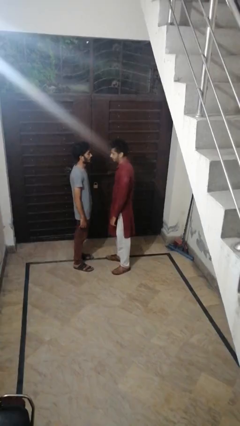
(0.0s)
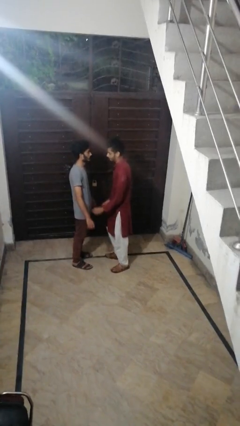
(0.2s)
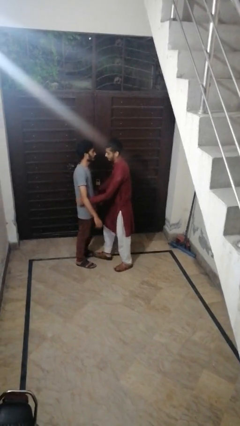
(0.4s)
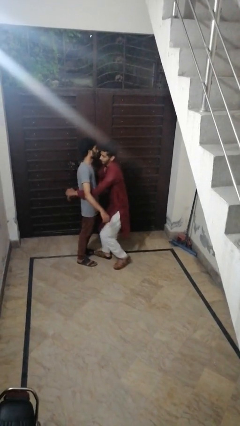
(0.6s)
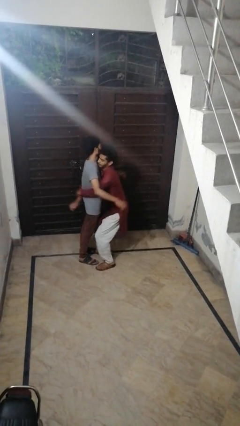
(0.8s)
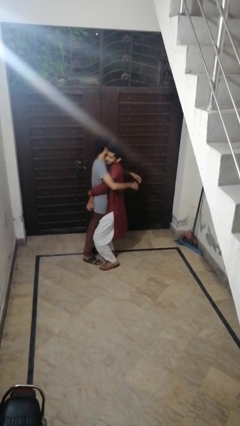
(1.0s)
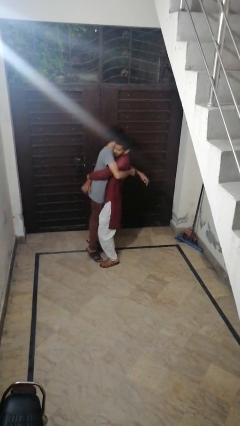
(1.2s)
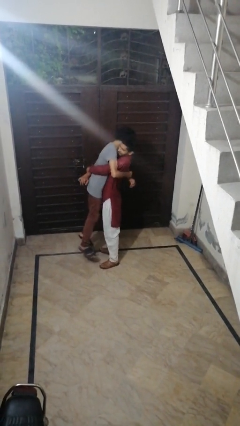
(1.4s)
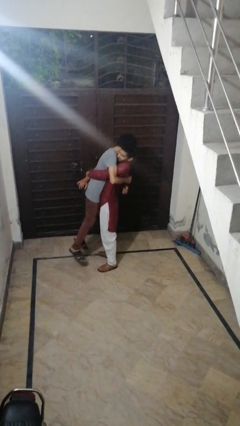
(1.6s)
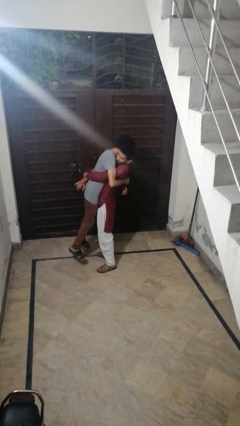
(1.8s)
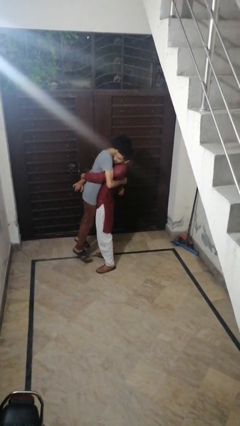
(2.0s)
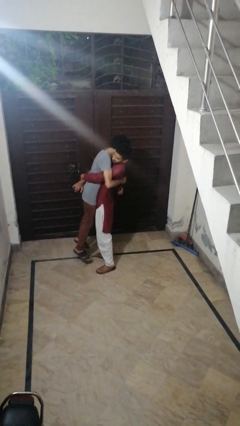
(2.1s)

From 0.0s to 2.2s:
person picks up person

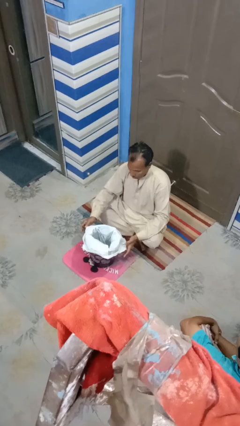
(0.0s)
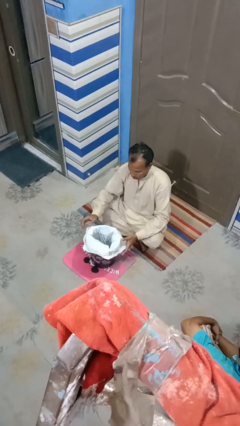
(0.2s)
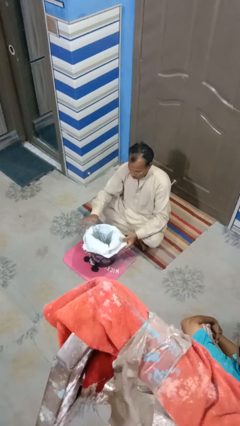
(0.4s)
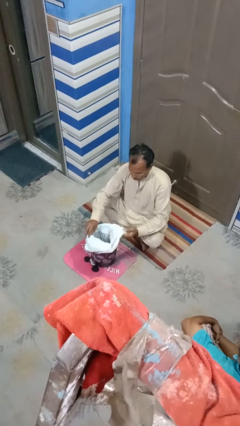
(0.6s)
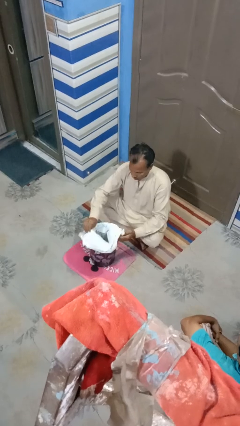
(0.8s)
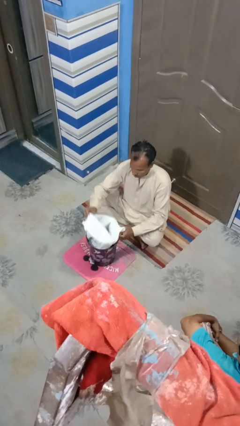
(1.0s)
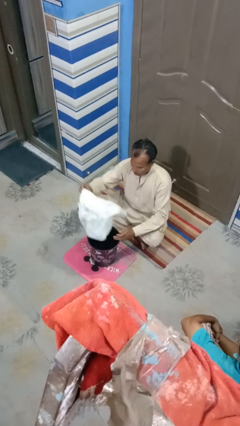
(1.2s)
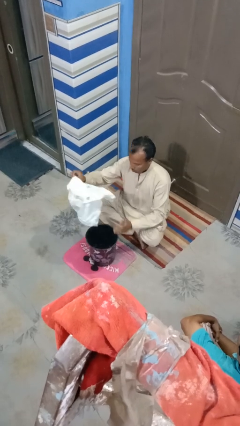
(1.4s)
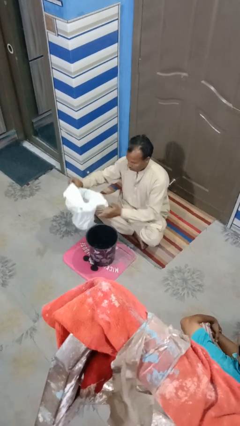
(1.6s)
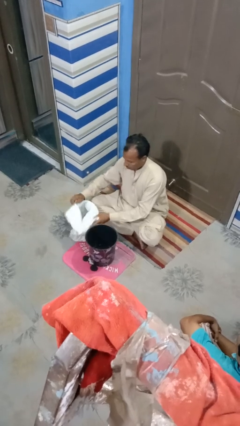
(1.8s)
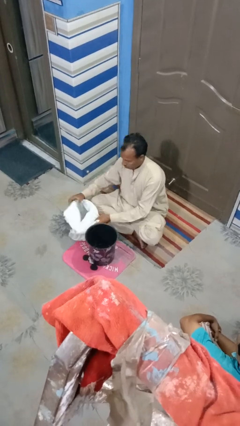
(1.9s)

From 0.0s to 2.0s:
person inserts trashbag into trashcan

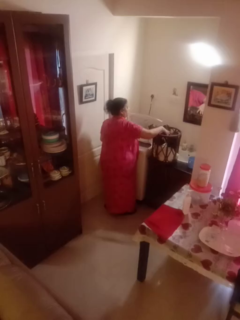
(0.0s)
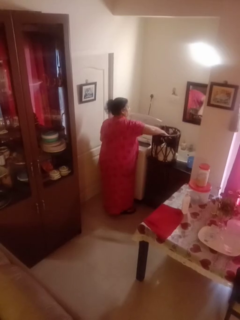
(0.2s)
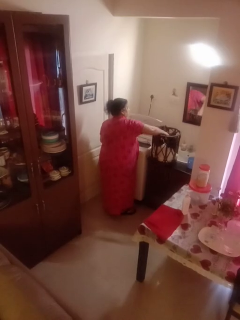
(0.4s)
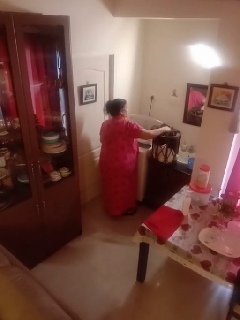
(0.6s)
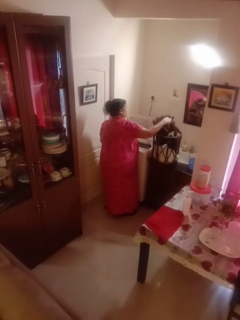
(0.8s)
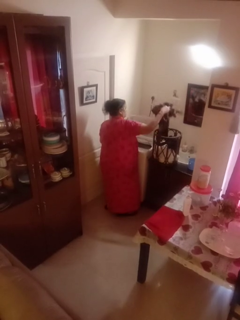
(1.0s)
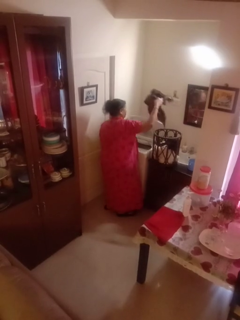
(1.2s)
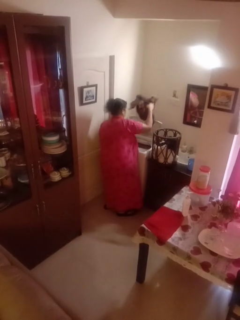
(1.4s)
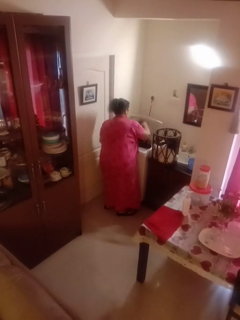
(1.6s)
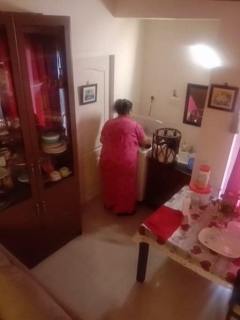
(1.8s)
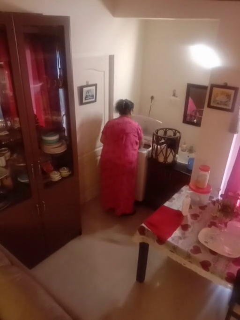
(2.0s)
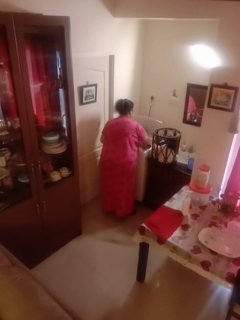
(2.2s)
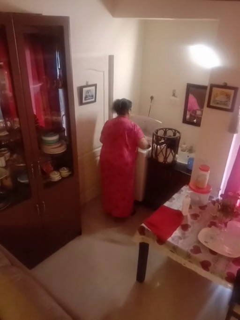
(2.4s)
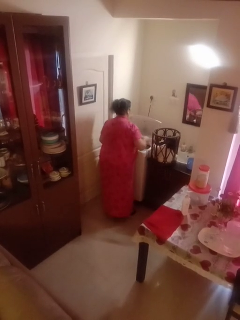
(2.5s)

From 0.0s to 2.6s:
person loads clotheswasher

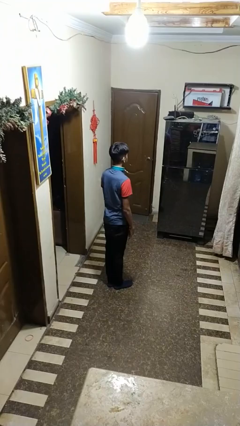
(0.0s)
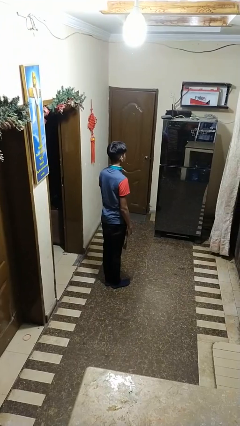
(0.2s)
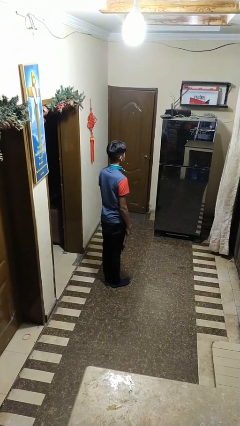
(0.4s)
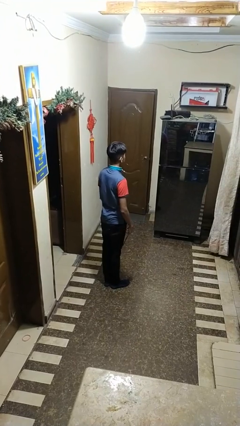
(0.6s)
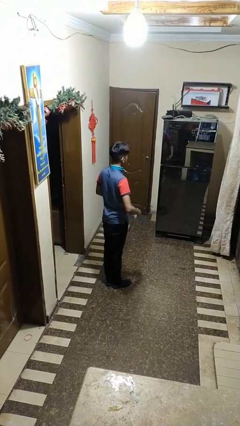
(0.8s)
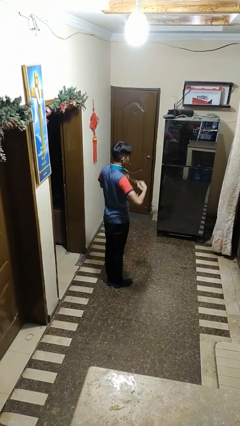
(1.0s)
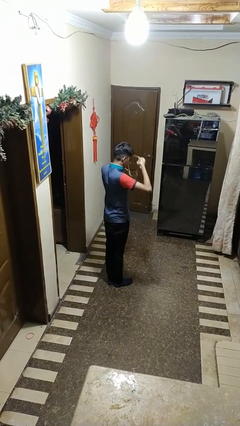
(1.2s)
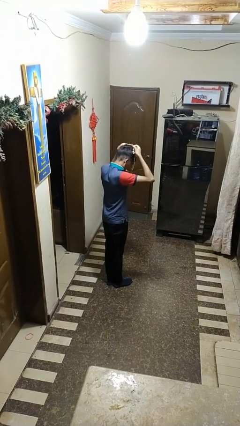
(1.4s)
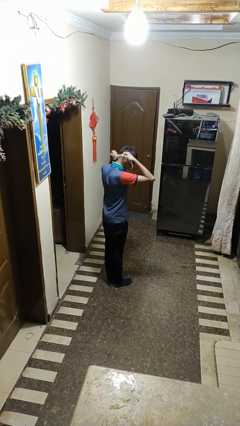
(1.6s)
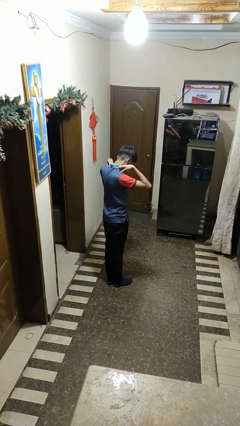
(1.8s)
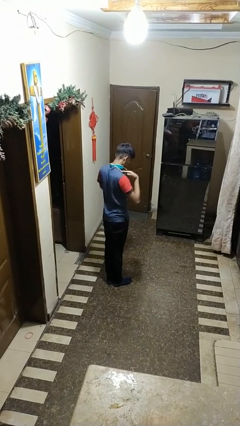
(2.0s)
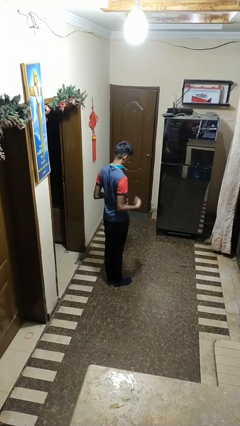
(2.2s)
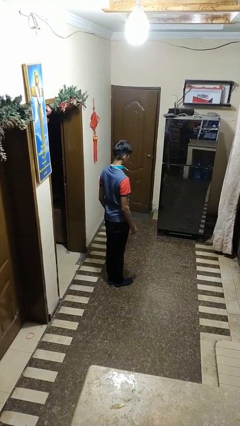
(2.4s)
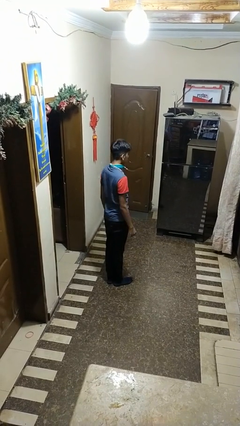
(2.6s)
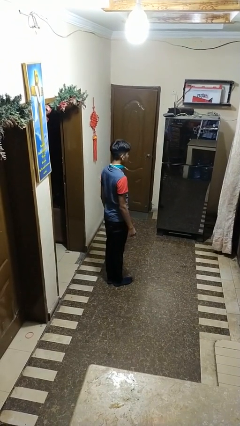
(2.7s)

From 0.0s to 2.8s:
person puts on necklace

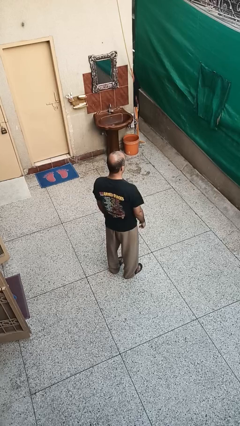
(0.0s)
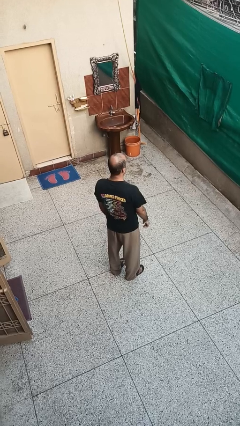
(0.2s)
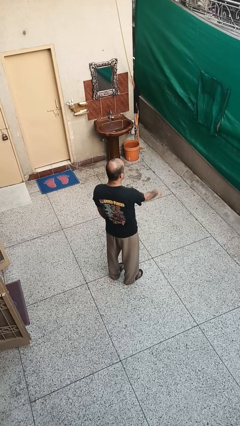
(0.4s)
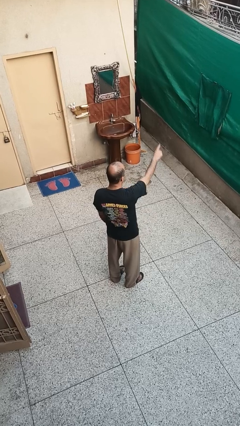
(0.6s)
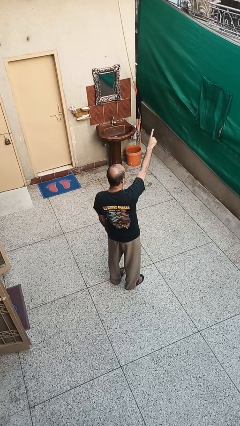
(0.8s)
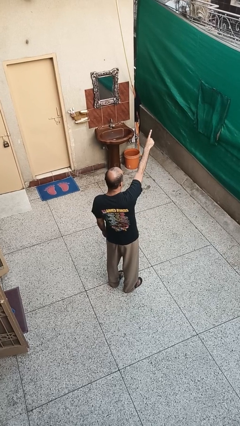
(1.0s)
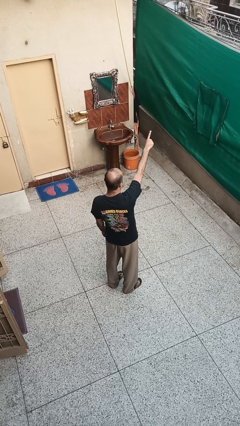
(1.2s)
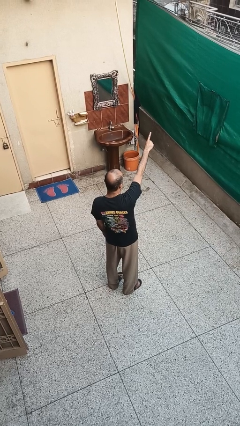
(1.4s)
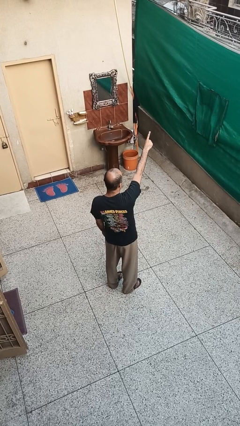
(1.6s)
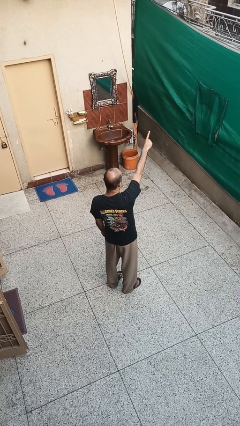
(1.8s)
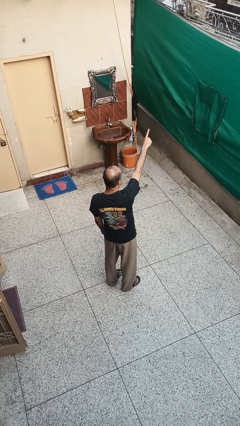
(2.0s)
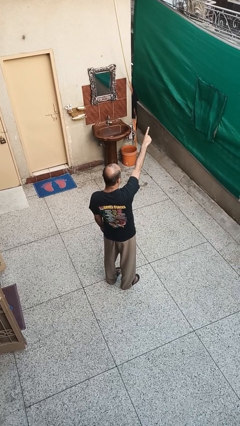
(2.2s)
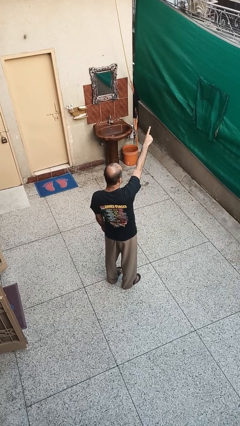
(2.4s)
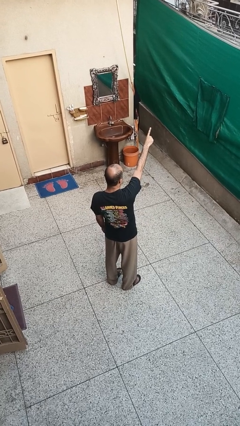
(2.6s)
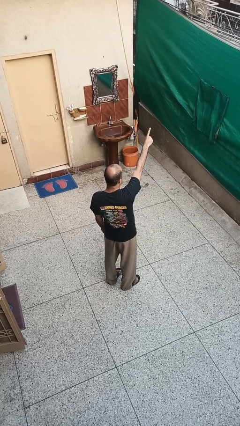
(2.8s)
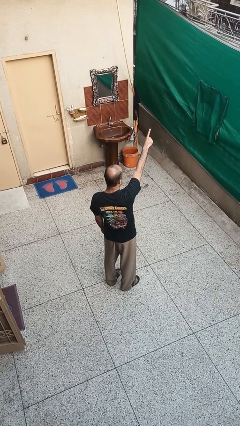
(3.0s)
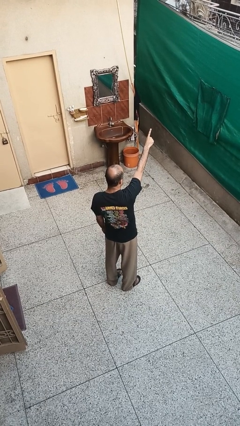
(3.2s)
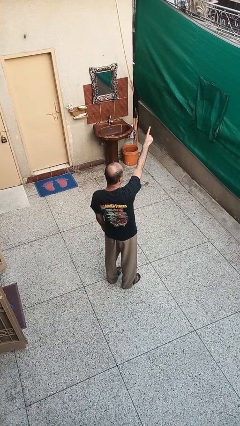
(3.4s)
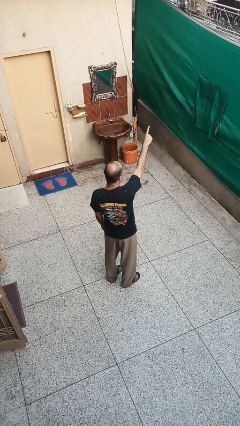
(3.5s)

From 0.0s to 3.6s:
person points at person

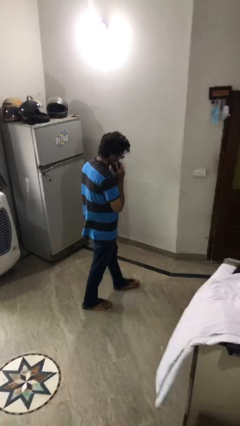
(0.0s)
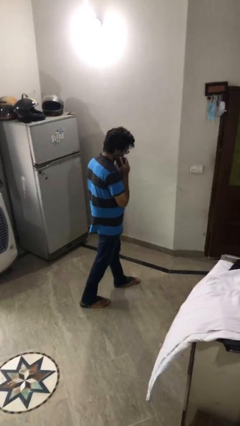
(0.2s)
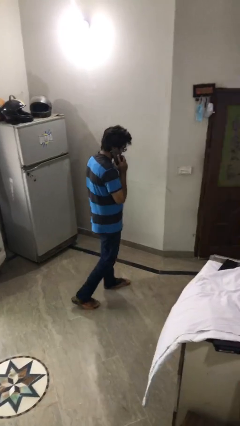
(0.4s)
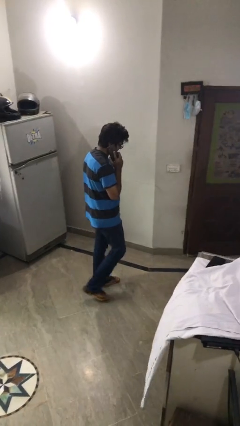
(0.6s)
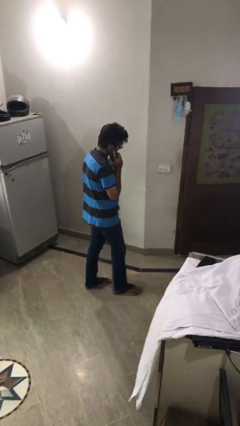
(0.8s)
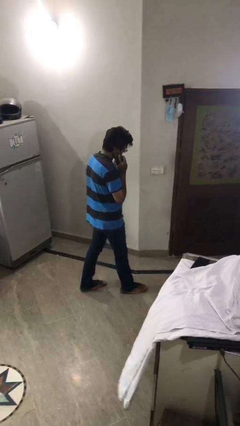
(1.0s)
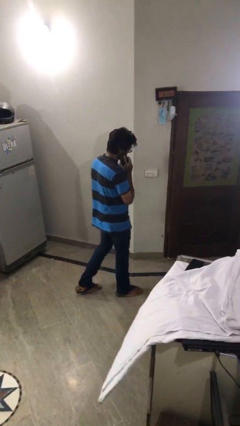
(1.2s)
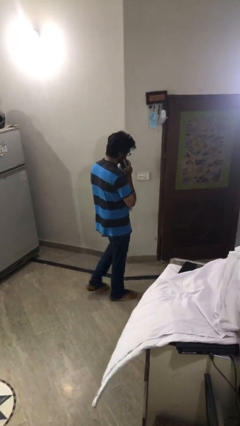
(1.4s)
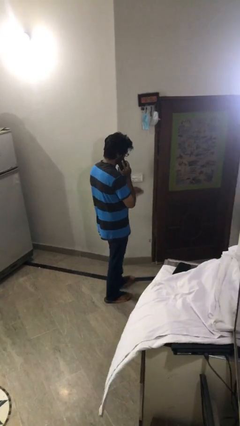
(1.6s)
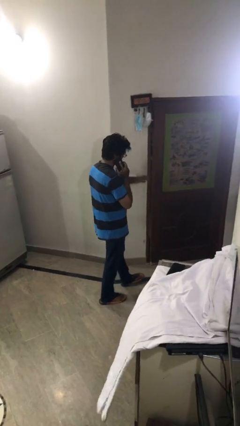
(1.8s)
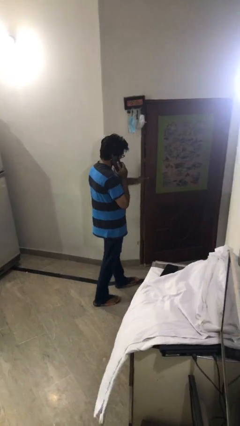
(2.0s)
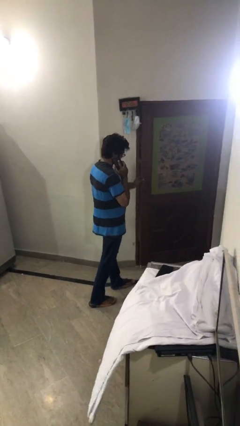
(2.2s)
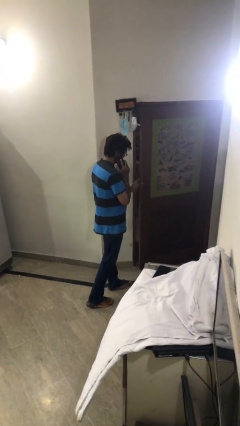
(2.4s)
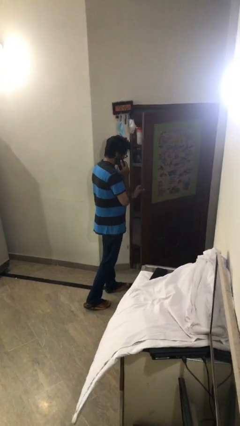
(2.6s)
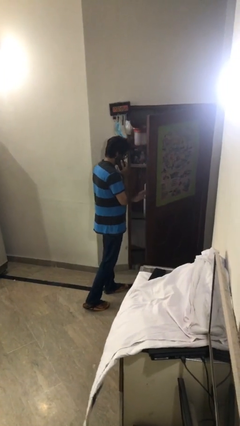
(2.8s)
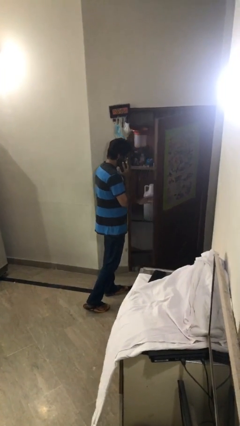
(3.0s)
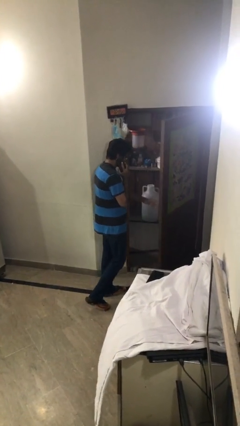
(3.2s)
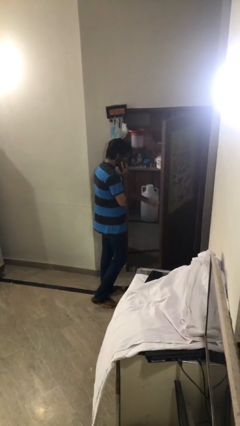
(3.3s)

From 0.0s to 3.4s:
person opens facility door

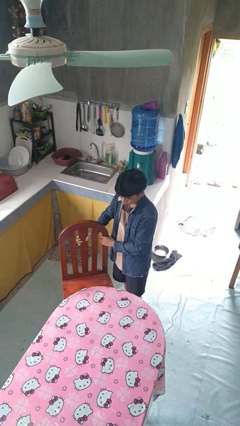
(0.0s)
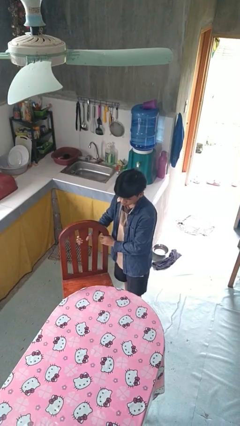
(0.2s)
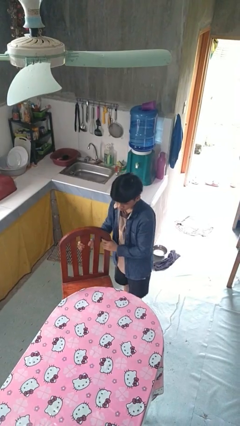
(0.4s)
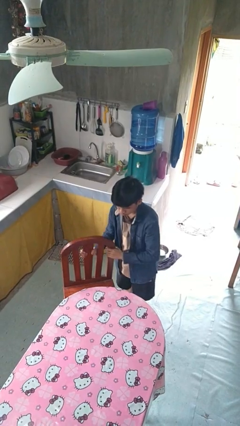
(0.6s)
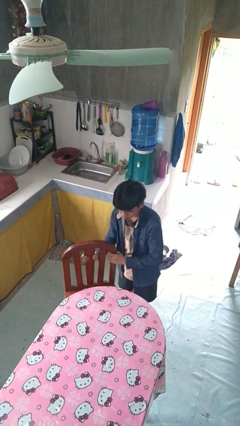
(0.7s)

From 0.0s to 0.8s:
person pushes in chair

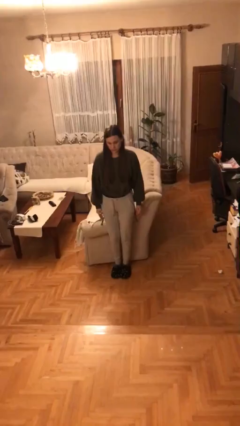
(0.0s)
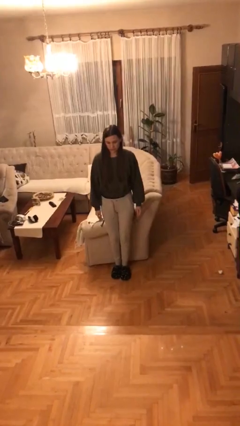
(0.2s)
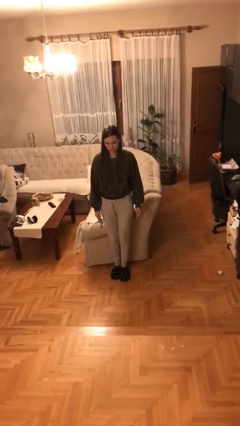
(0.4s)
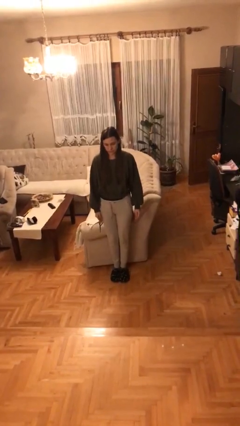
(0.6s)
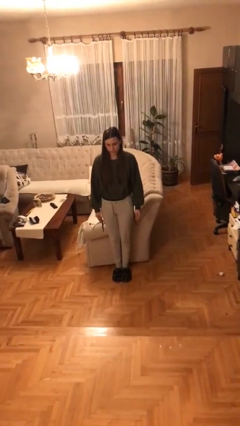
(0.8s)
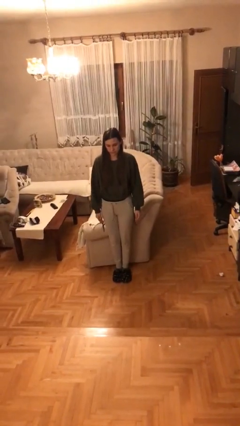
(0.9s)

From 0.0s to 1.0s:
person stands up from floor
